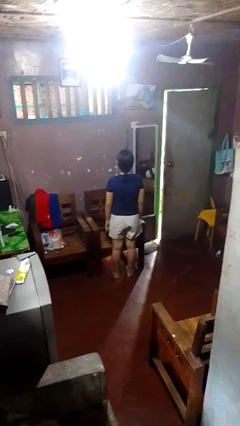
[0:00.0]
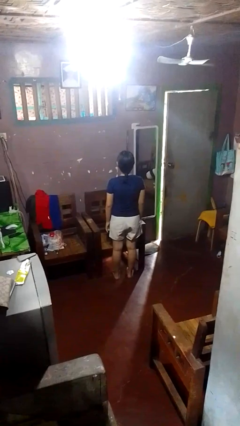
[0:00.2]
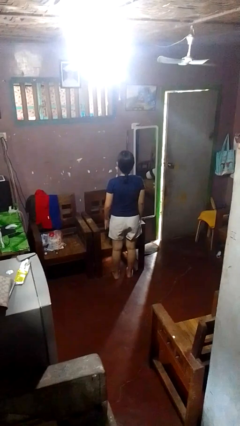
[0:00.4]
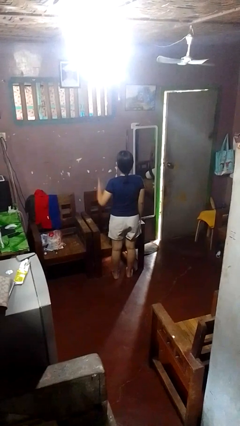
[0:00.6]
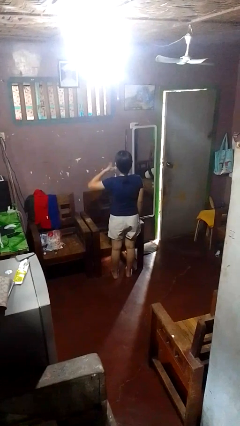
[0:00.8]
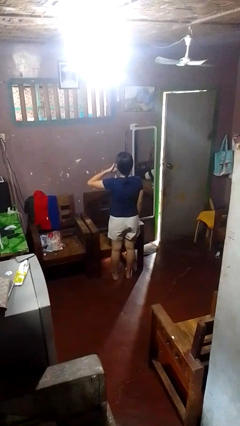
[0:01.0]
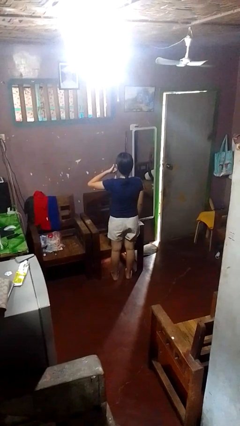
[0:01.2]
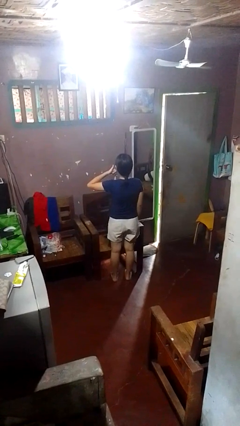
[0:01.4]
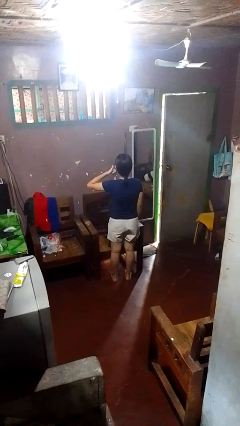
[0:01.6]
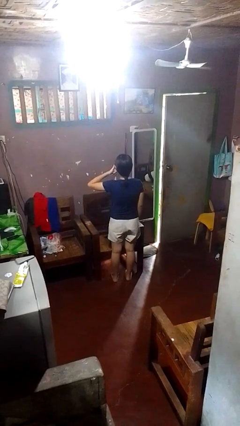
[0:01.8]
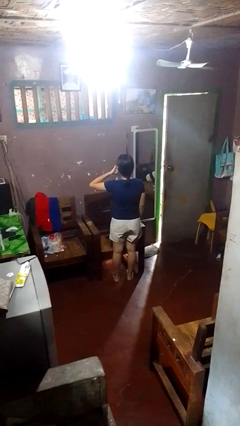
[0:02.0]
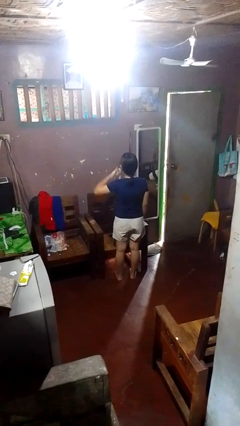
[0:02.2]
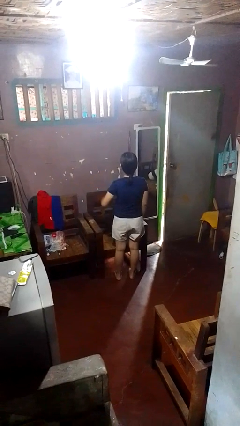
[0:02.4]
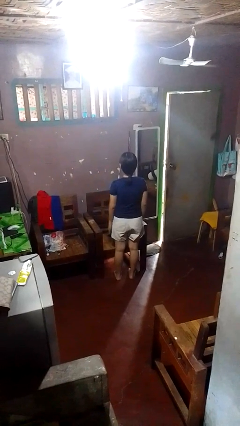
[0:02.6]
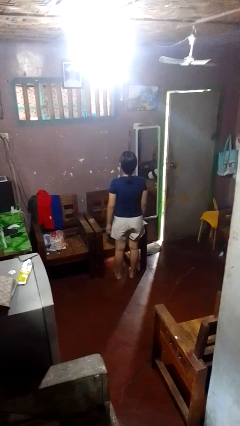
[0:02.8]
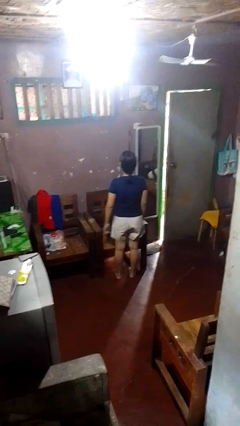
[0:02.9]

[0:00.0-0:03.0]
person gestures call me

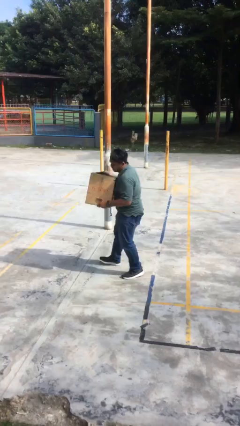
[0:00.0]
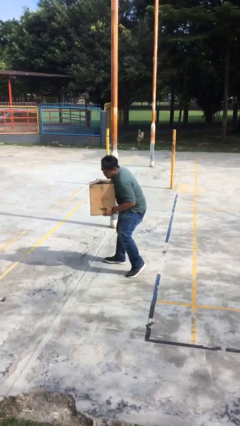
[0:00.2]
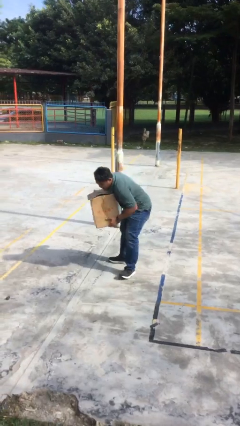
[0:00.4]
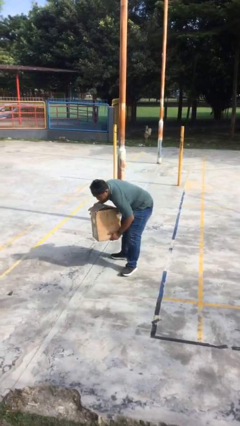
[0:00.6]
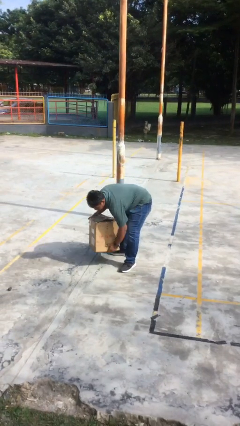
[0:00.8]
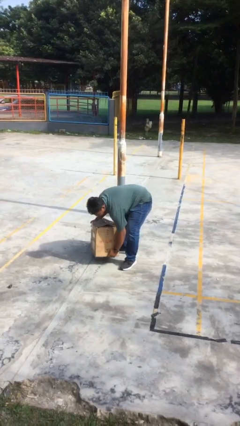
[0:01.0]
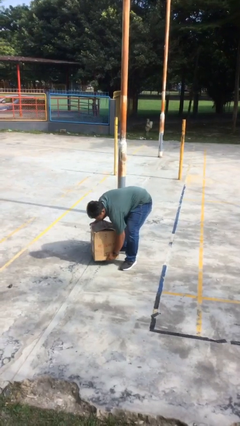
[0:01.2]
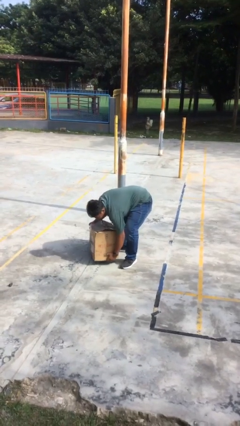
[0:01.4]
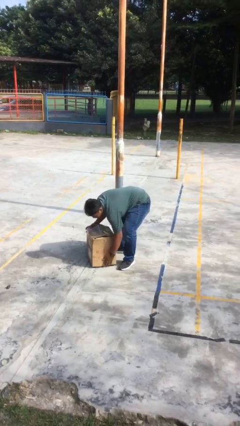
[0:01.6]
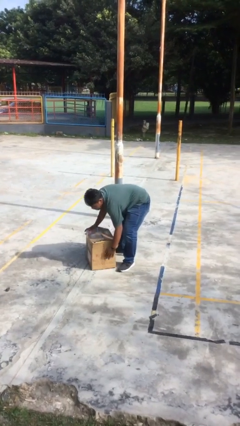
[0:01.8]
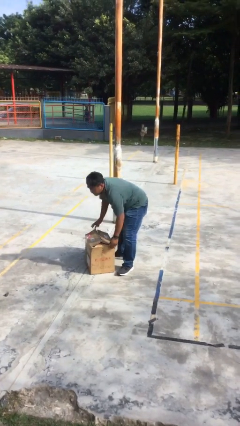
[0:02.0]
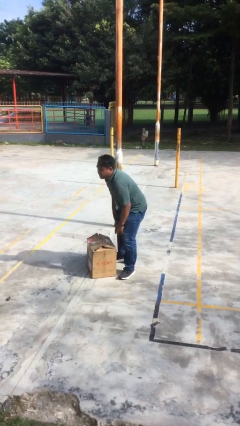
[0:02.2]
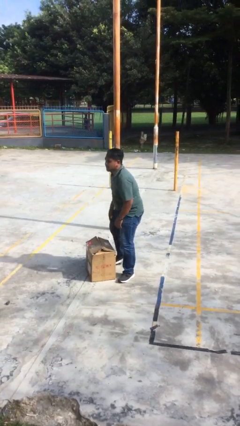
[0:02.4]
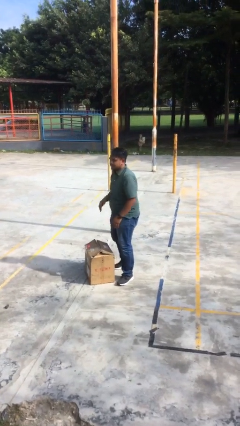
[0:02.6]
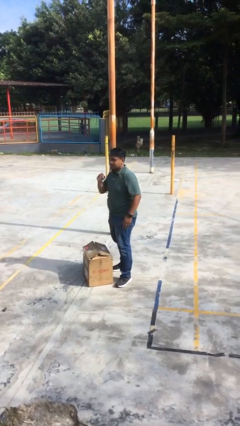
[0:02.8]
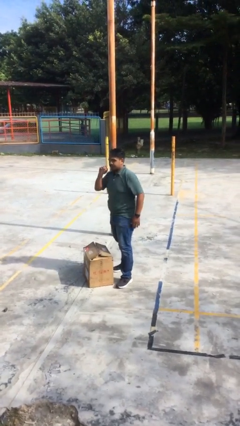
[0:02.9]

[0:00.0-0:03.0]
person puts down object on floor

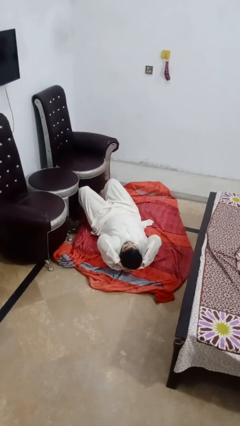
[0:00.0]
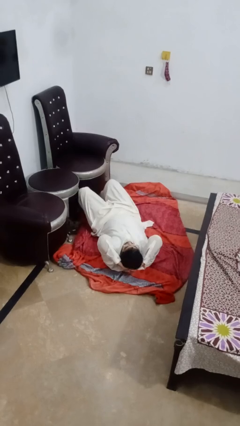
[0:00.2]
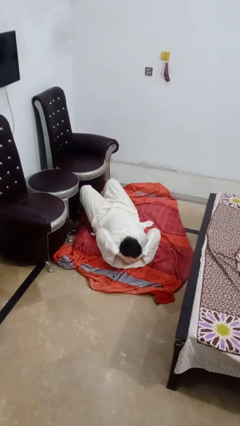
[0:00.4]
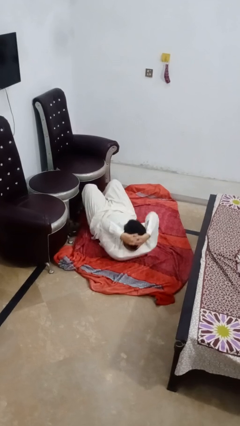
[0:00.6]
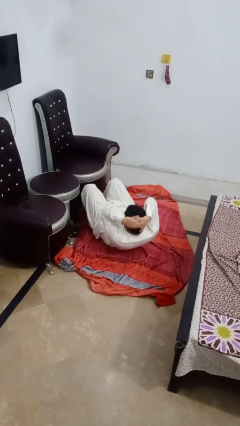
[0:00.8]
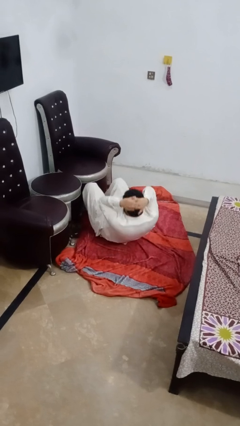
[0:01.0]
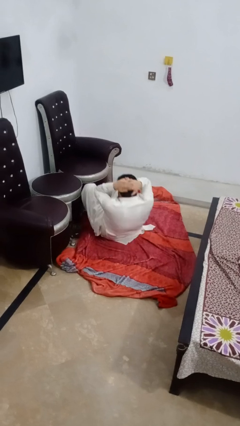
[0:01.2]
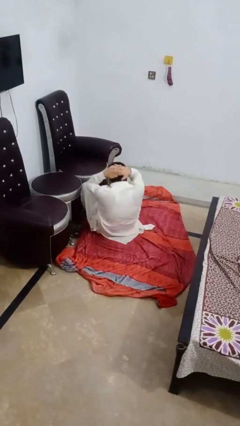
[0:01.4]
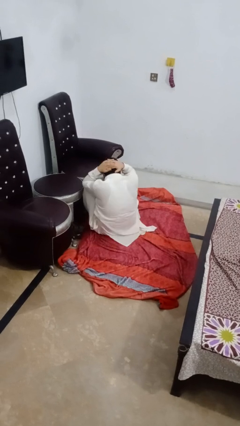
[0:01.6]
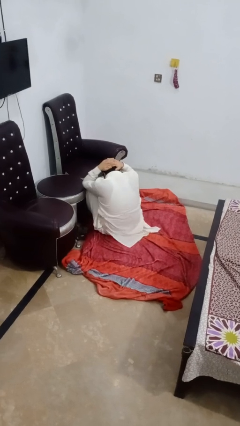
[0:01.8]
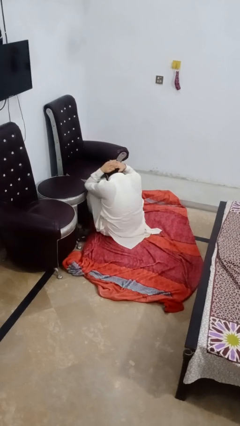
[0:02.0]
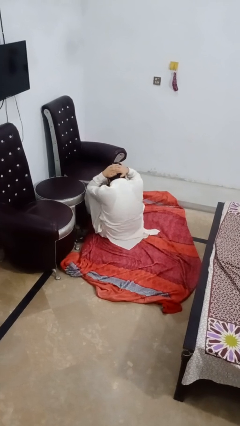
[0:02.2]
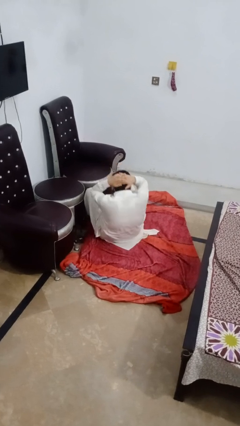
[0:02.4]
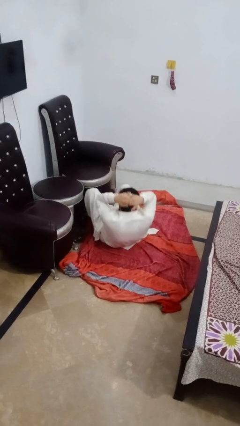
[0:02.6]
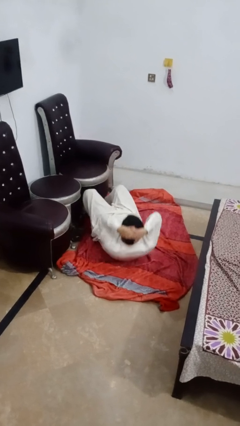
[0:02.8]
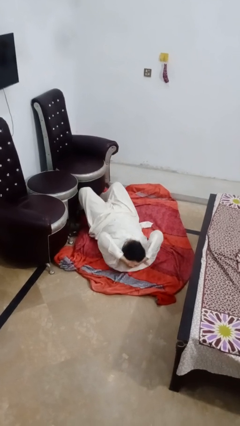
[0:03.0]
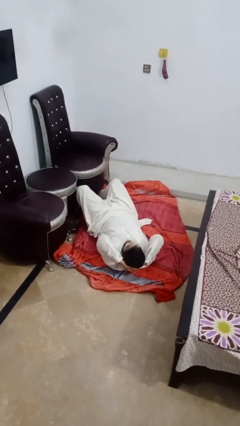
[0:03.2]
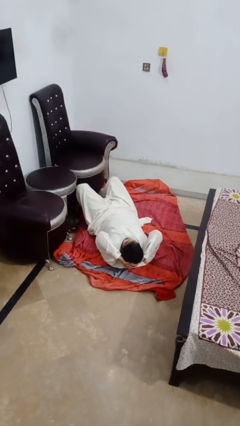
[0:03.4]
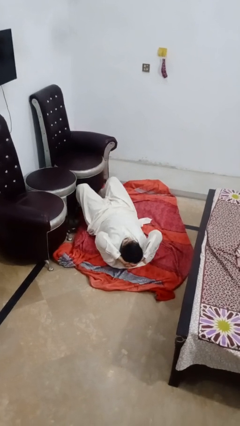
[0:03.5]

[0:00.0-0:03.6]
person exercises with situp

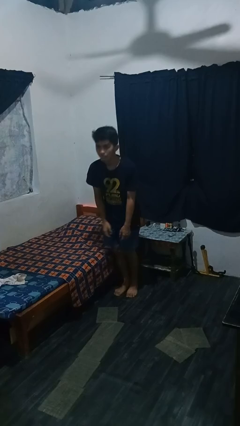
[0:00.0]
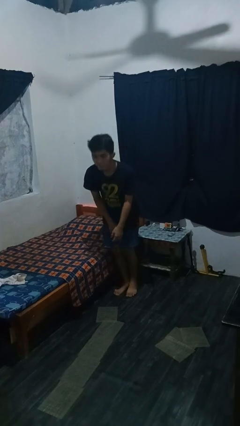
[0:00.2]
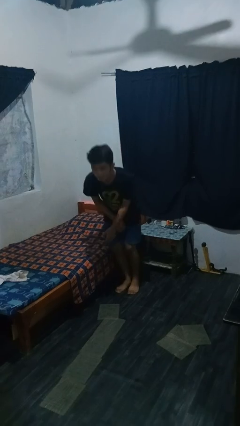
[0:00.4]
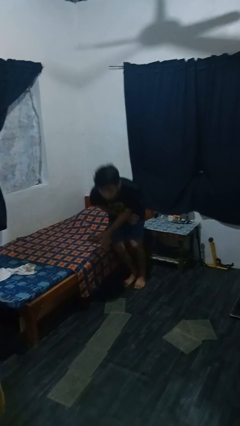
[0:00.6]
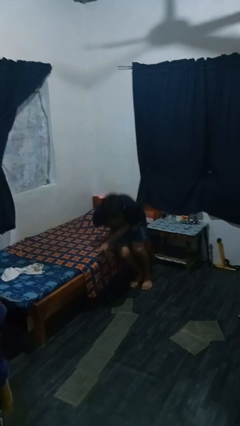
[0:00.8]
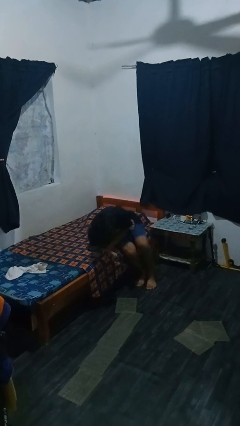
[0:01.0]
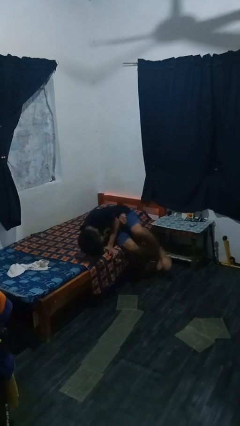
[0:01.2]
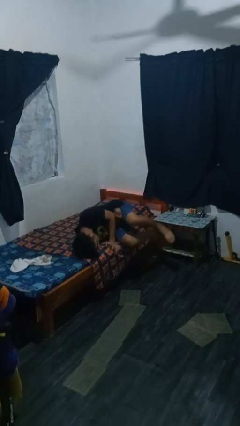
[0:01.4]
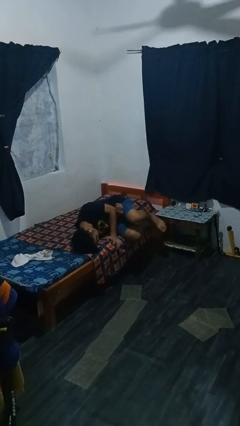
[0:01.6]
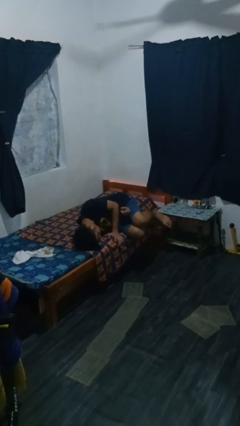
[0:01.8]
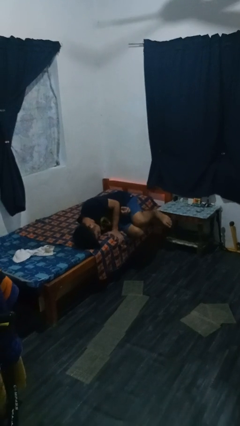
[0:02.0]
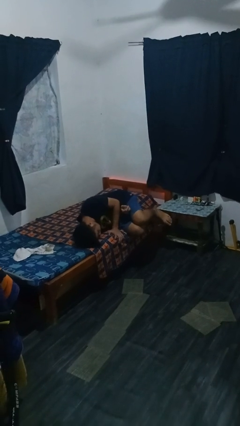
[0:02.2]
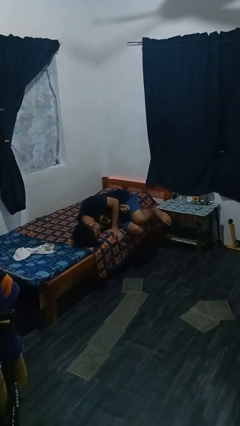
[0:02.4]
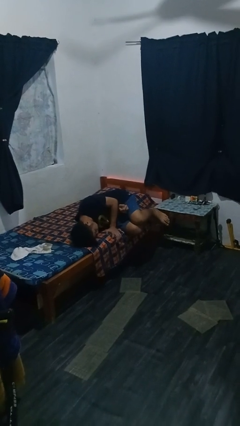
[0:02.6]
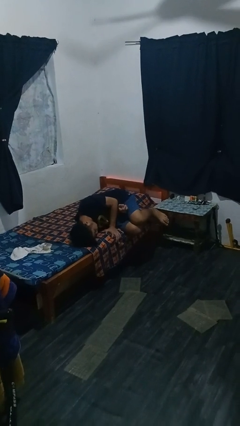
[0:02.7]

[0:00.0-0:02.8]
person lies down on bed

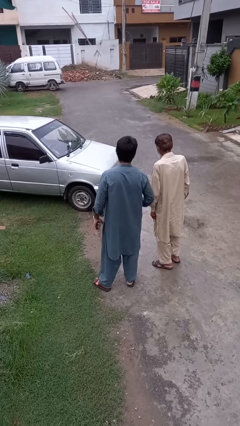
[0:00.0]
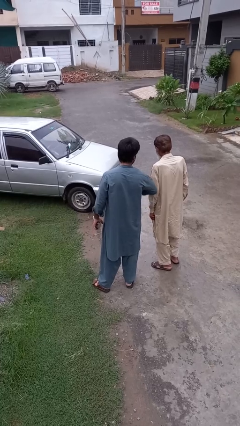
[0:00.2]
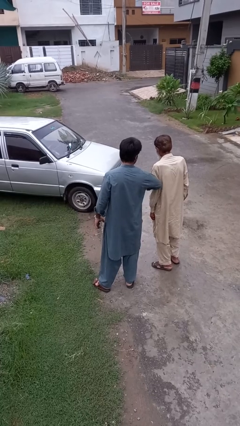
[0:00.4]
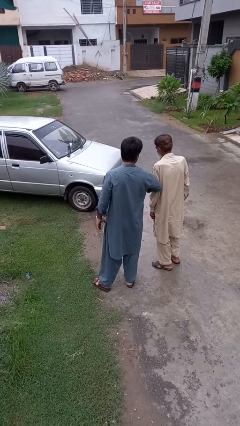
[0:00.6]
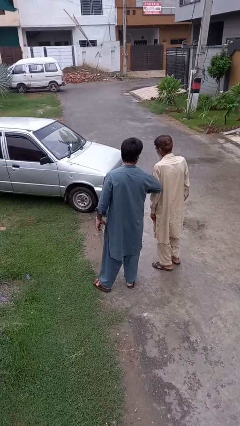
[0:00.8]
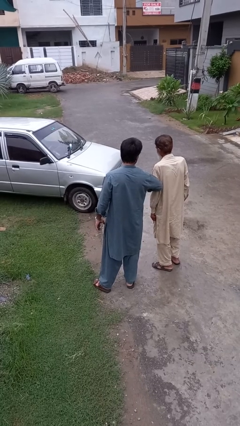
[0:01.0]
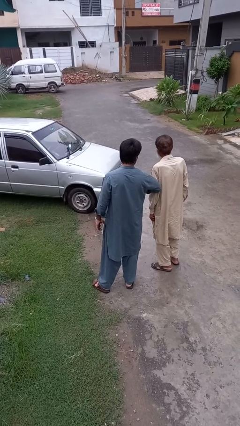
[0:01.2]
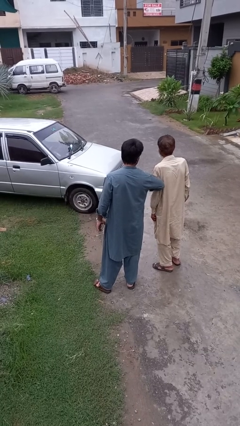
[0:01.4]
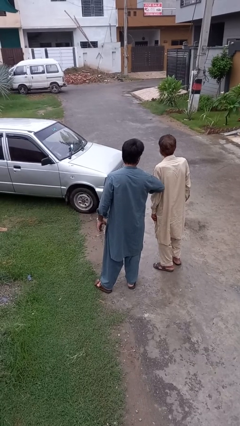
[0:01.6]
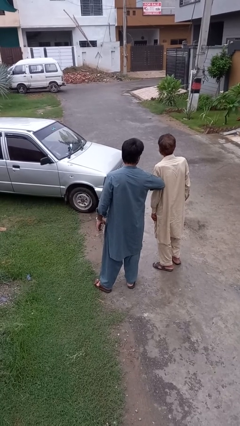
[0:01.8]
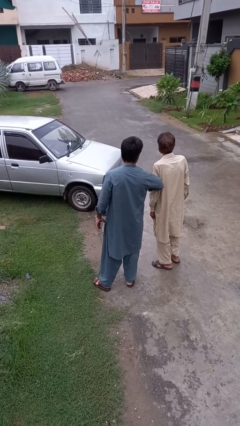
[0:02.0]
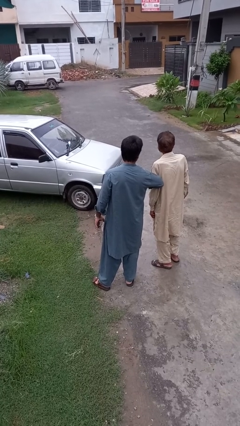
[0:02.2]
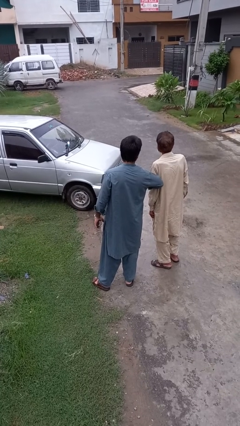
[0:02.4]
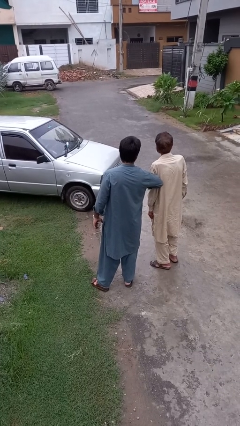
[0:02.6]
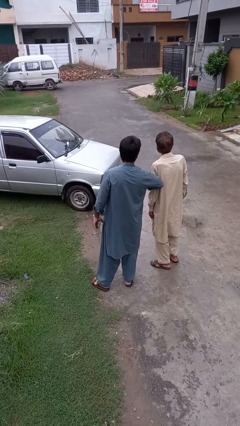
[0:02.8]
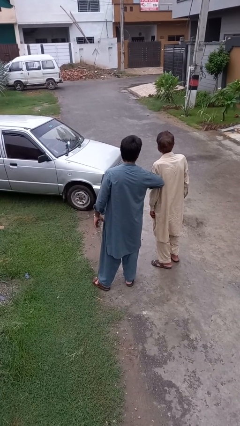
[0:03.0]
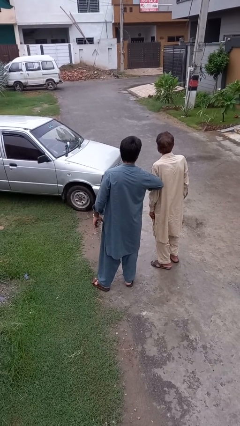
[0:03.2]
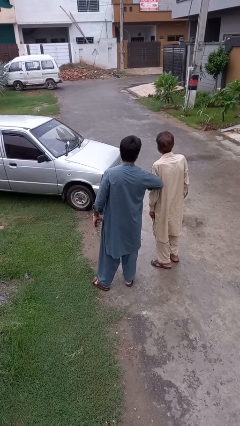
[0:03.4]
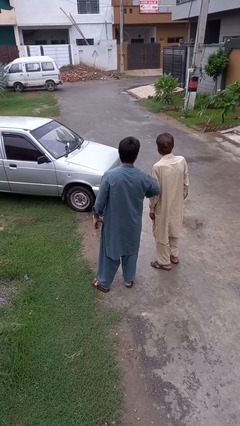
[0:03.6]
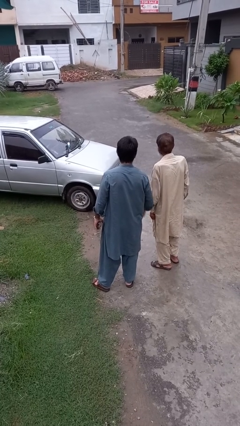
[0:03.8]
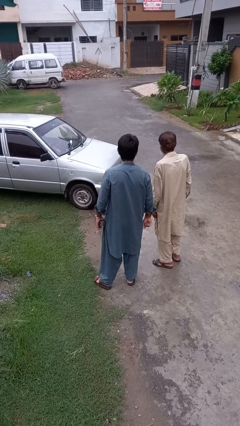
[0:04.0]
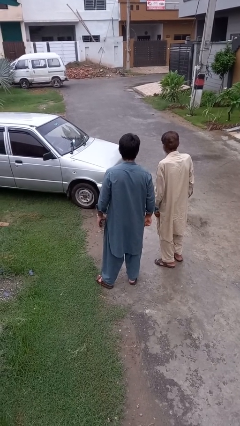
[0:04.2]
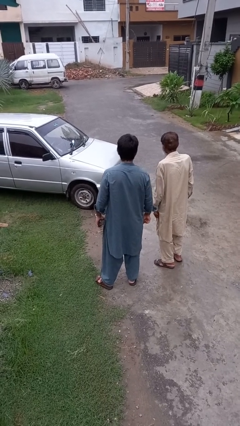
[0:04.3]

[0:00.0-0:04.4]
person nudges person with elbow

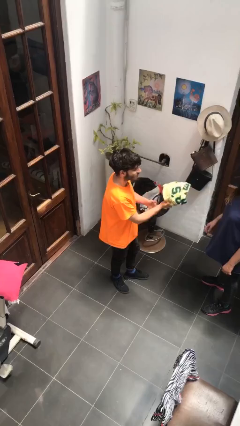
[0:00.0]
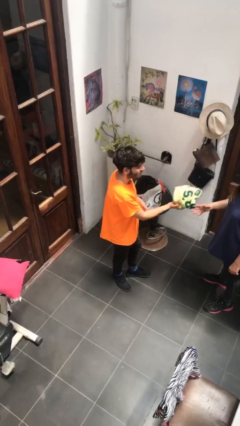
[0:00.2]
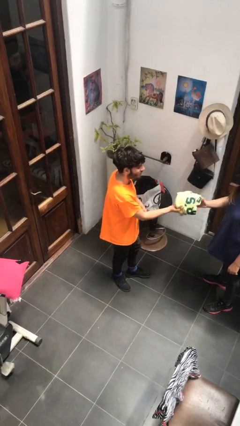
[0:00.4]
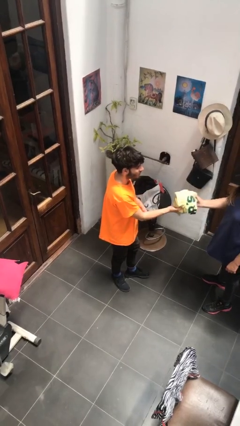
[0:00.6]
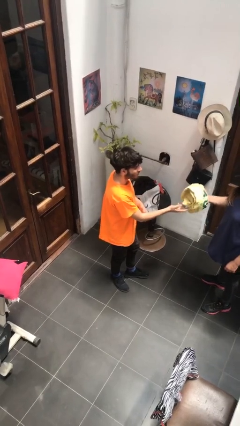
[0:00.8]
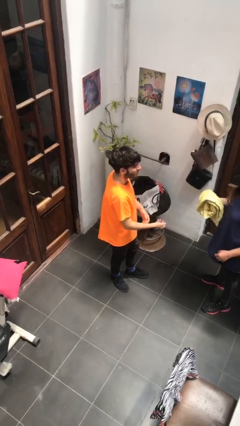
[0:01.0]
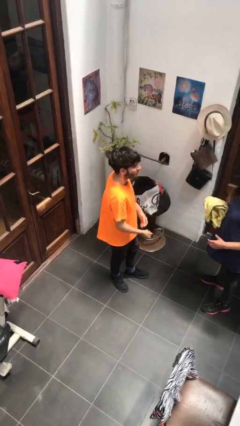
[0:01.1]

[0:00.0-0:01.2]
person transfers object to person
